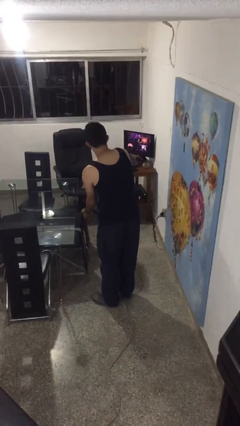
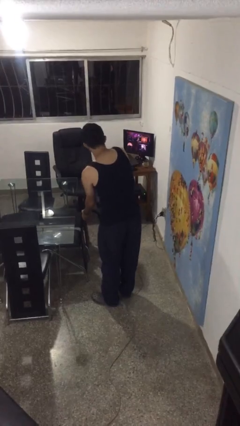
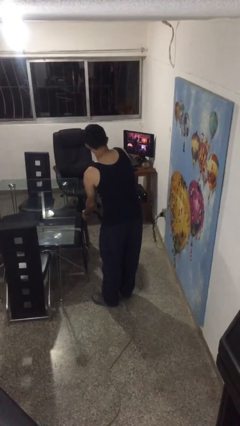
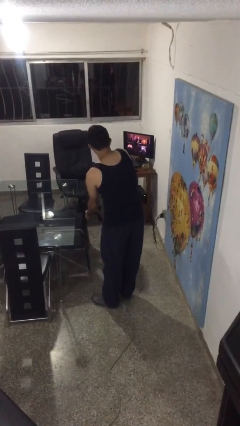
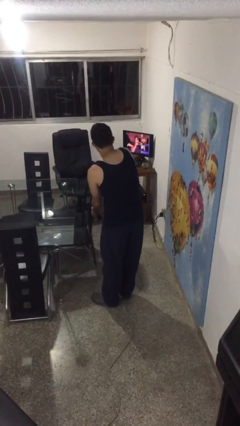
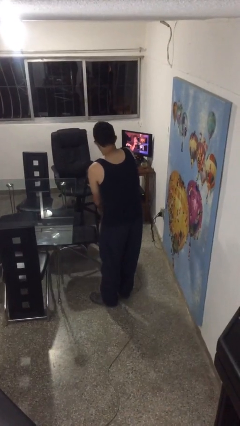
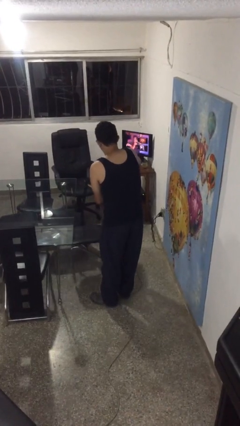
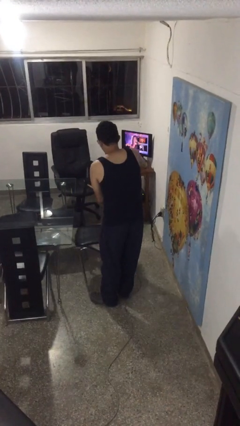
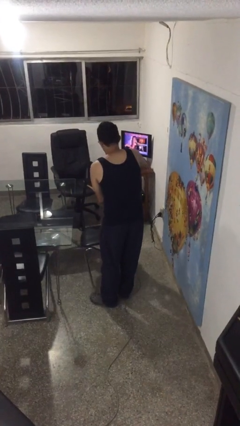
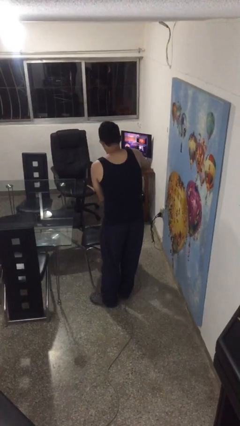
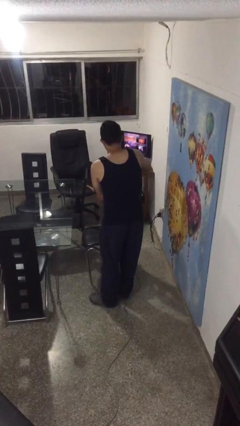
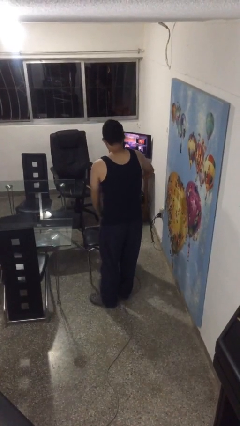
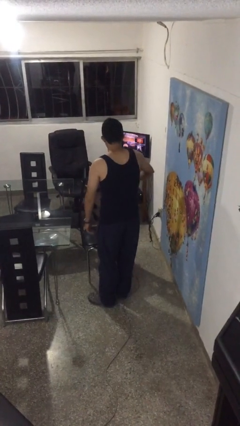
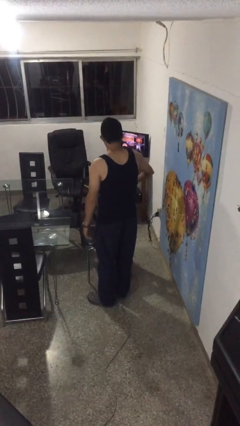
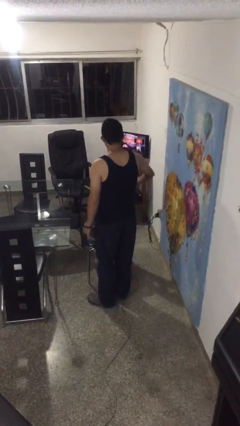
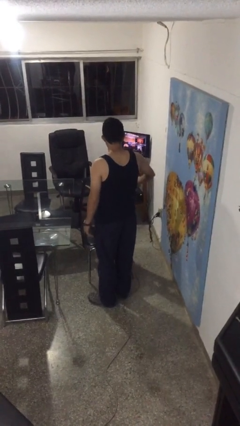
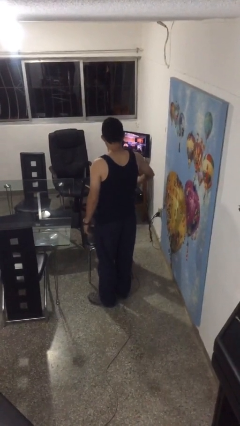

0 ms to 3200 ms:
person pulls out chair

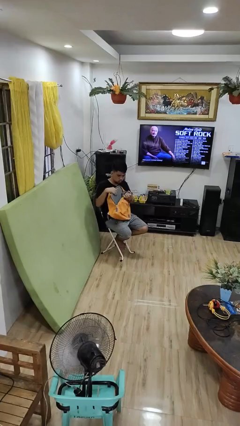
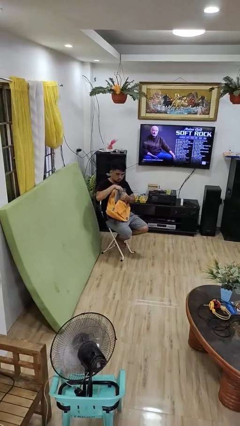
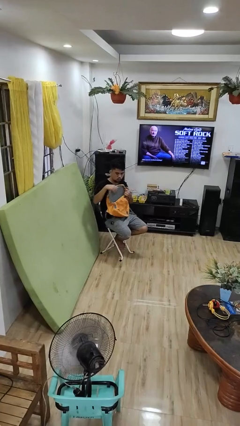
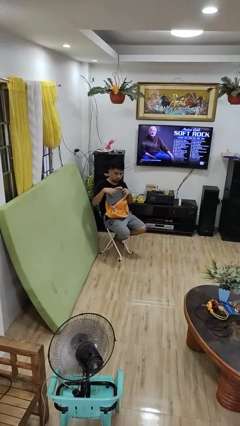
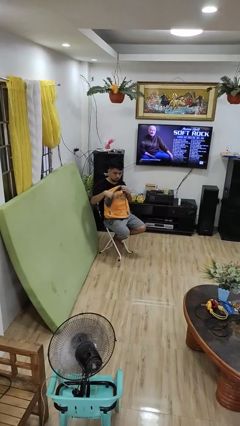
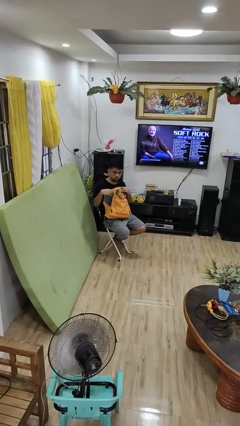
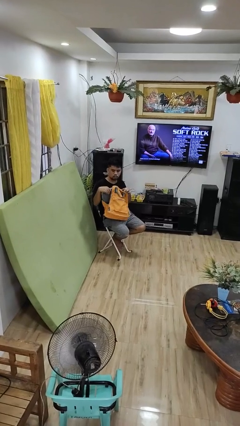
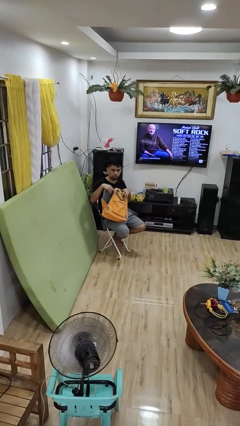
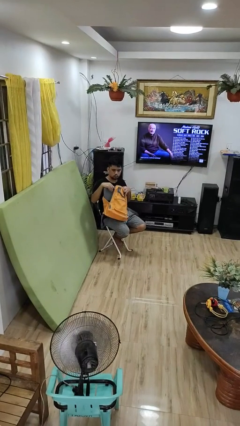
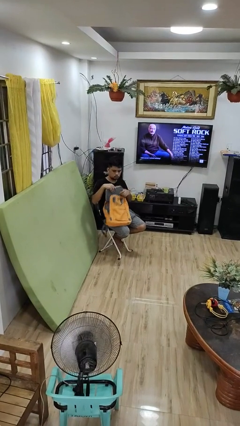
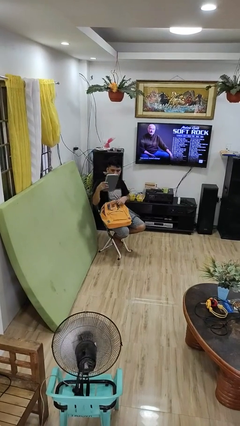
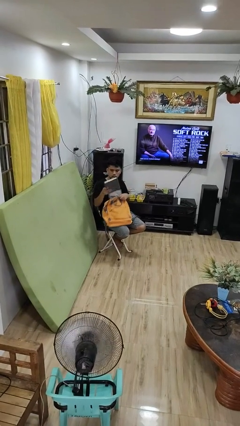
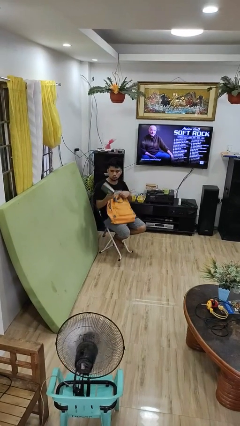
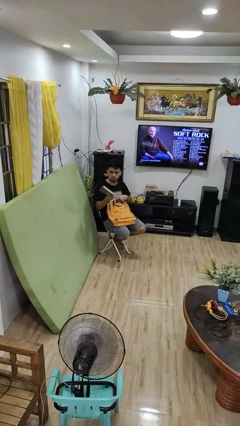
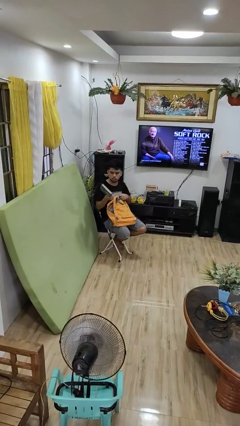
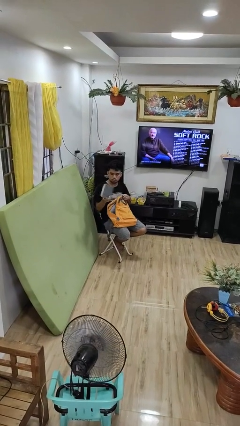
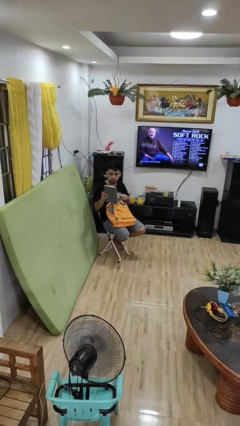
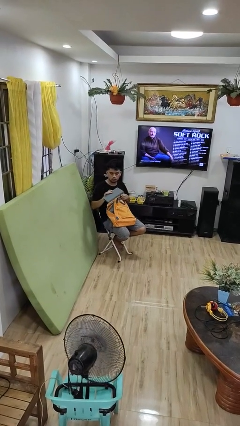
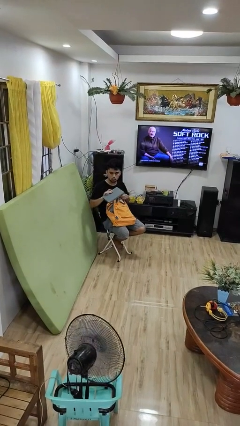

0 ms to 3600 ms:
person takes object from backpack

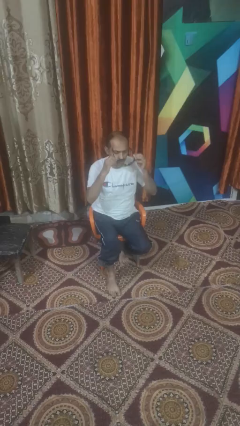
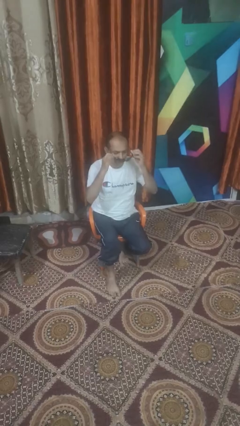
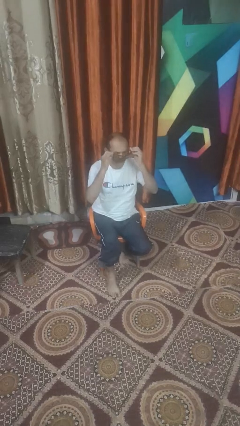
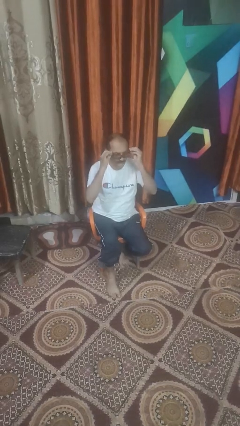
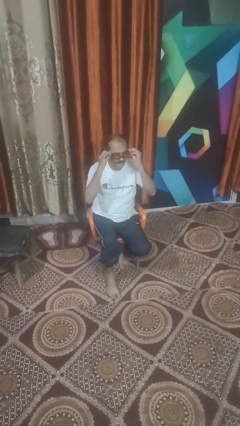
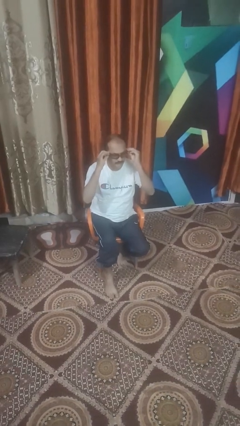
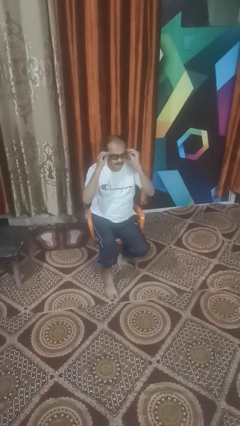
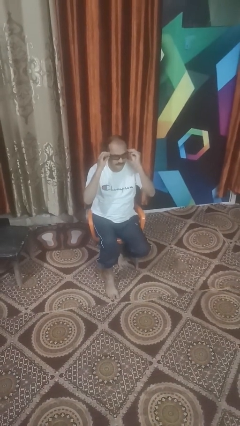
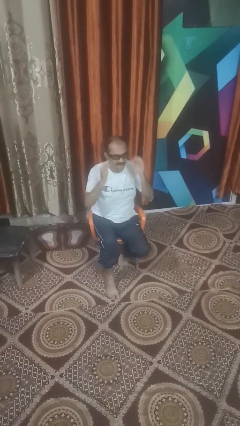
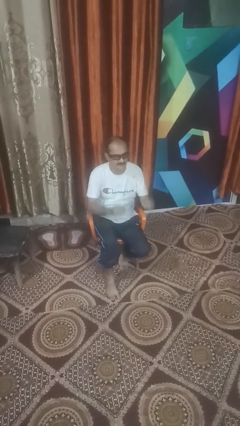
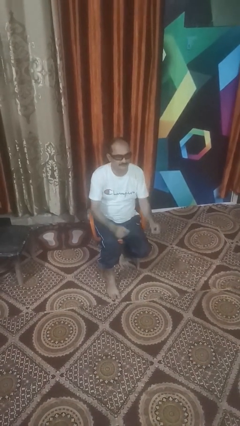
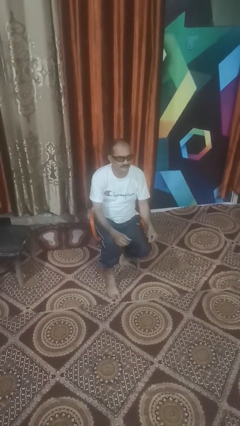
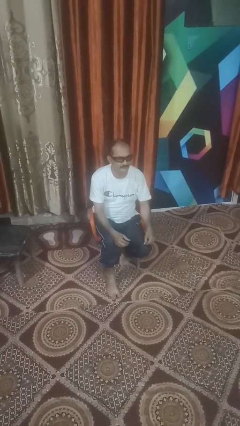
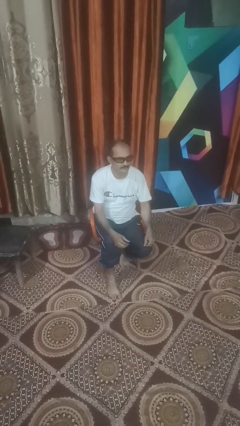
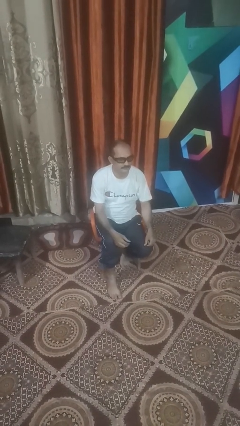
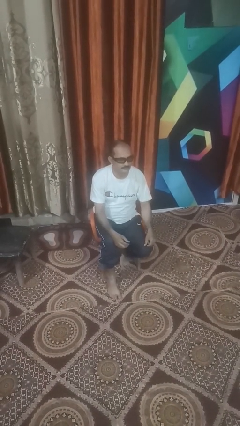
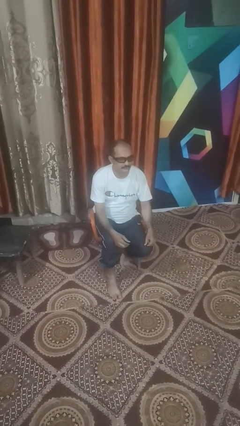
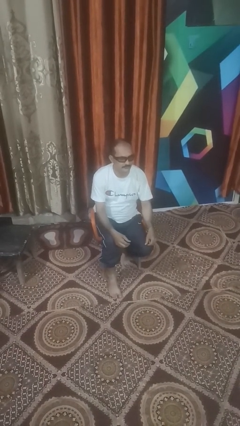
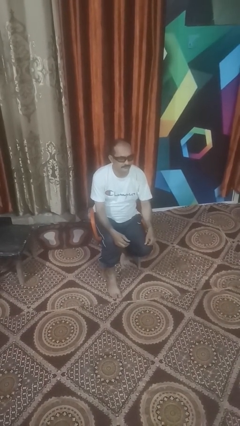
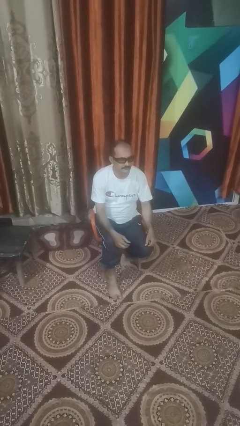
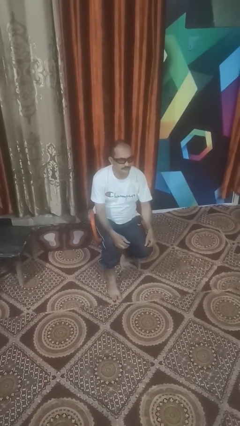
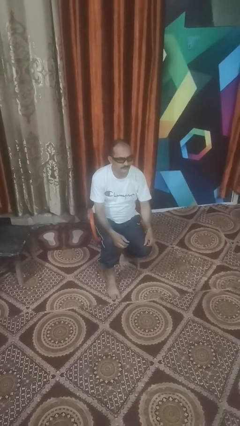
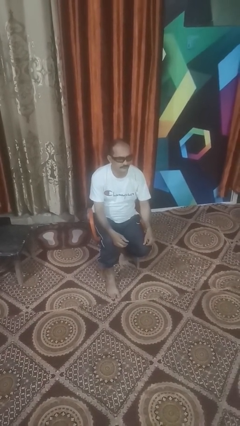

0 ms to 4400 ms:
person puts on sunglasses

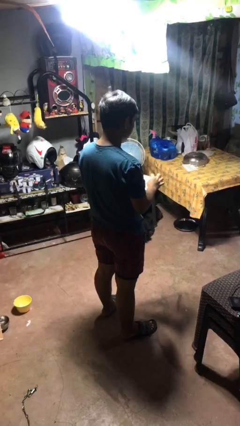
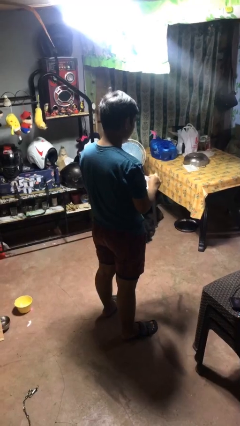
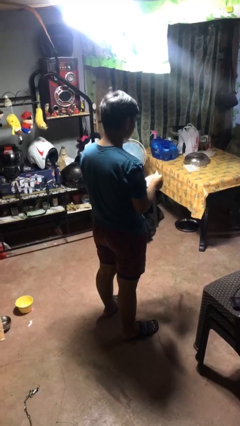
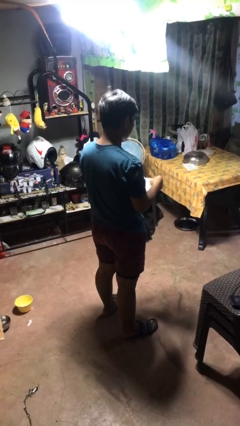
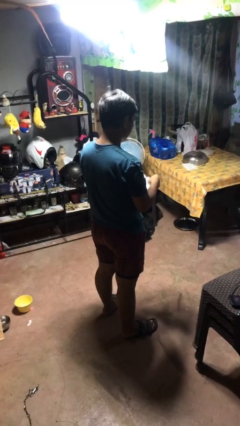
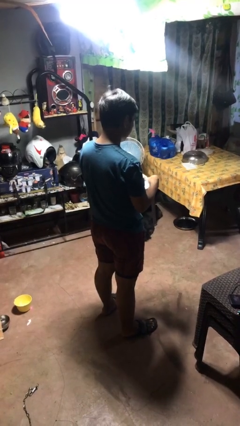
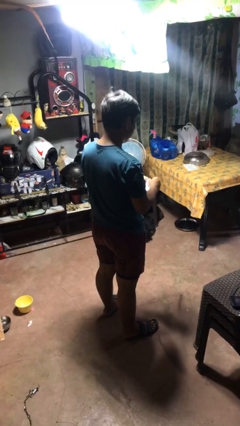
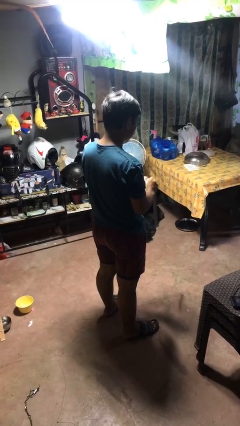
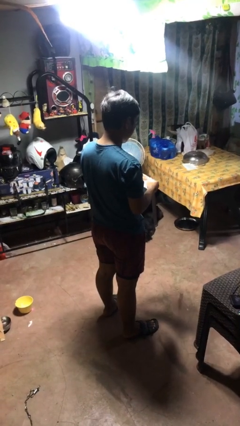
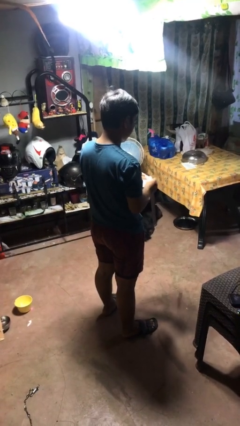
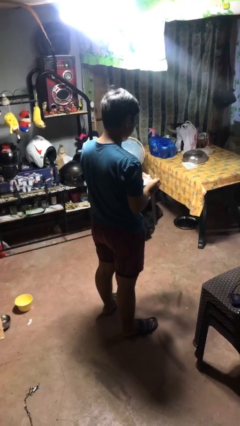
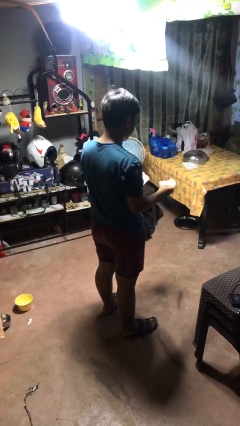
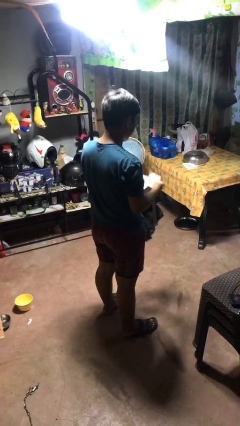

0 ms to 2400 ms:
person tears paper

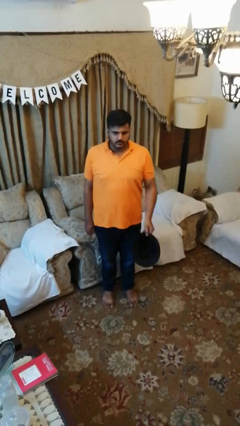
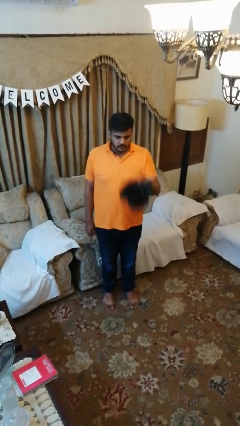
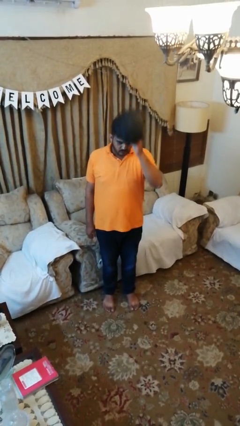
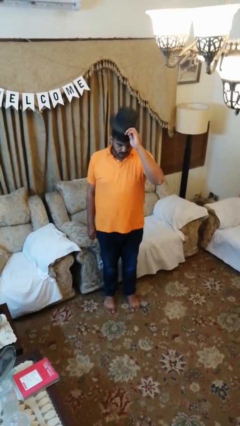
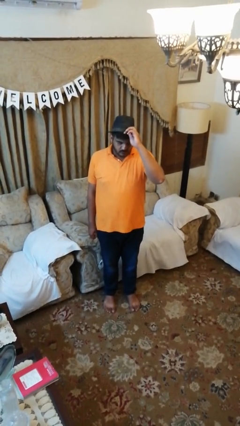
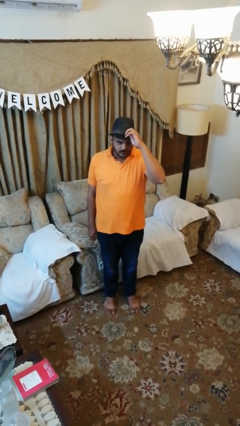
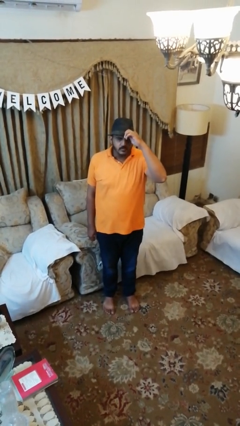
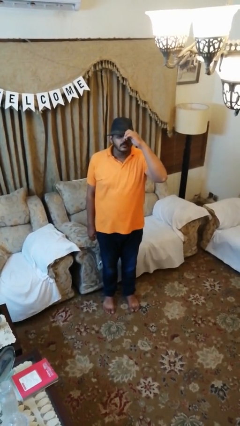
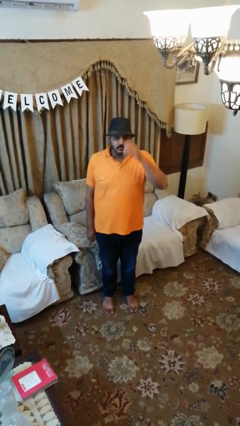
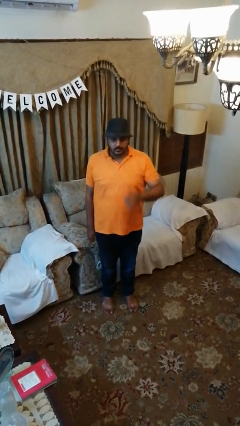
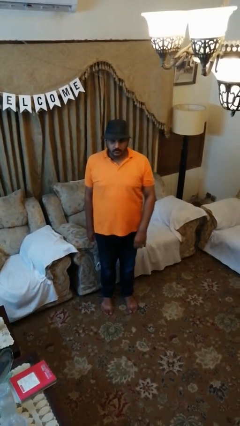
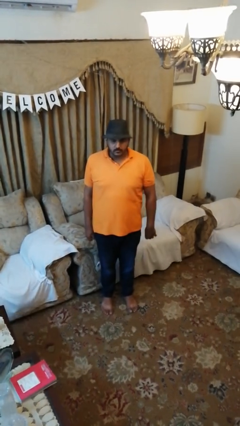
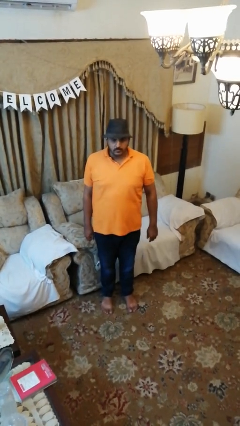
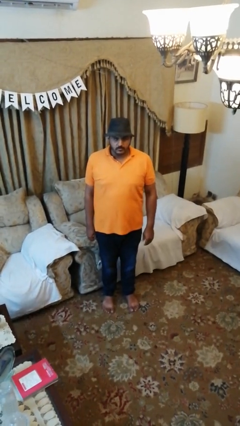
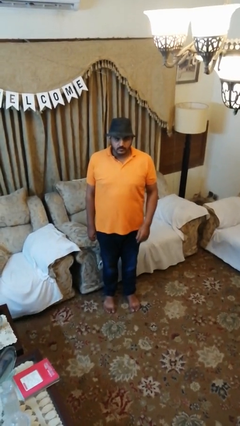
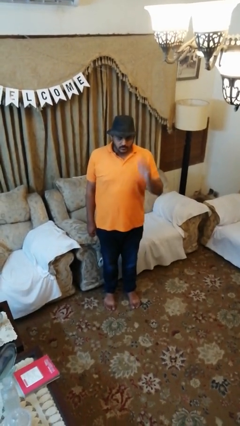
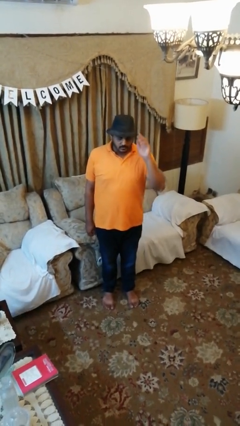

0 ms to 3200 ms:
person puts on hat

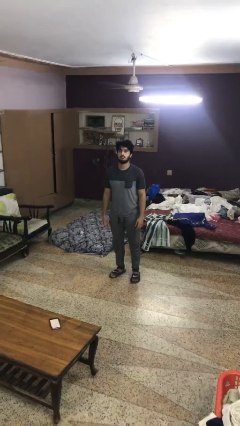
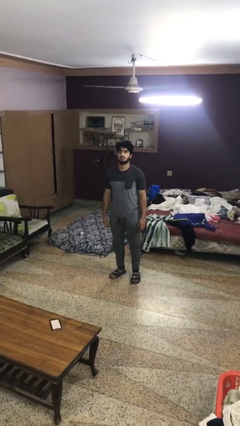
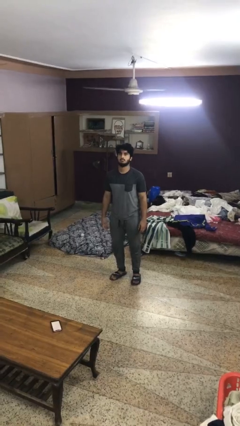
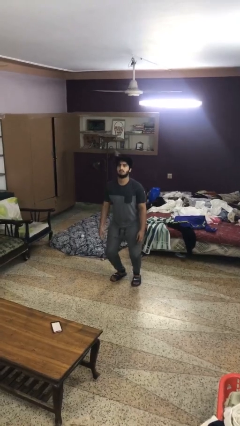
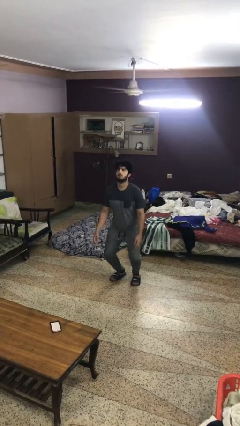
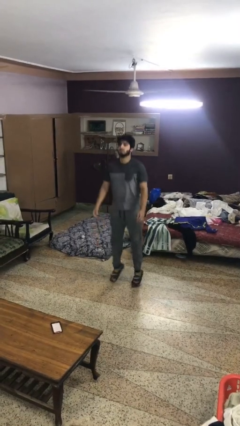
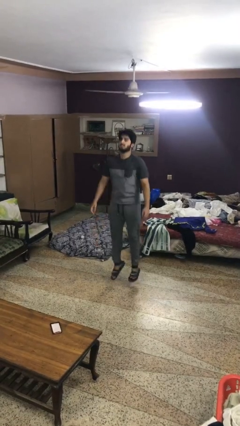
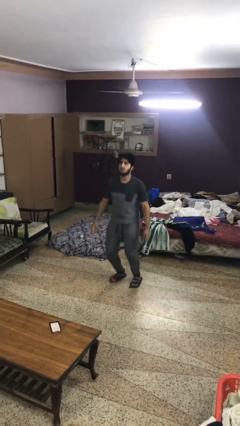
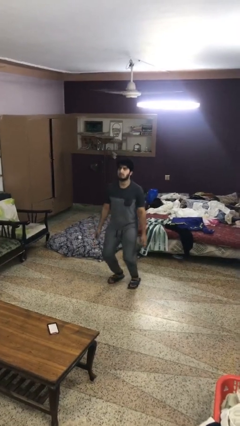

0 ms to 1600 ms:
person jumps
